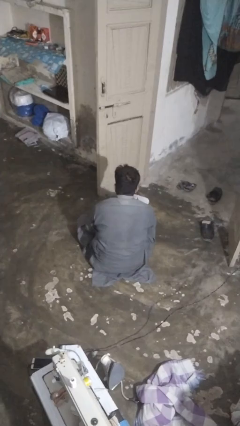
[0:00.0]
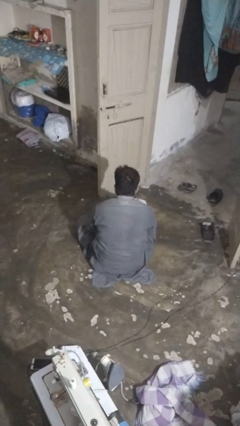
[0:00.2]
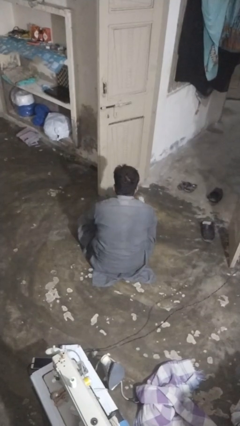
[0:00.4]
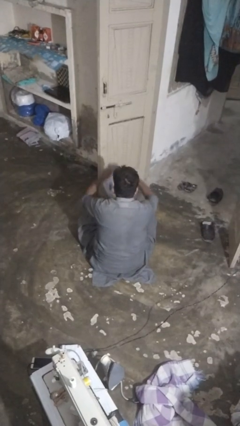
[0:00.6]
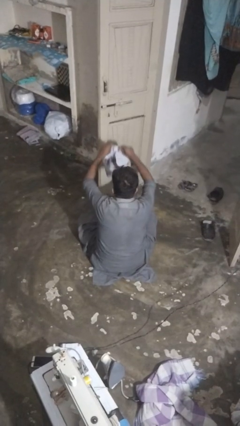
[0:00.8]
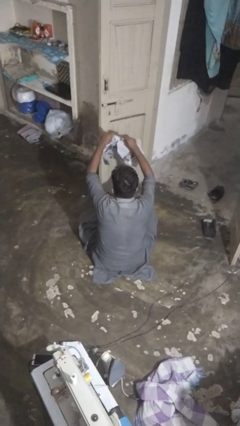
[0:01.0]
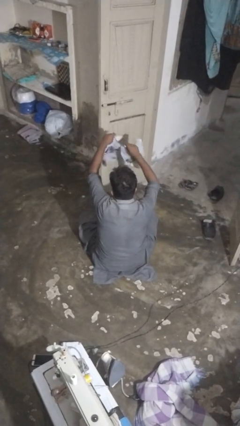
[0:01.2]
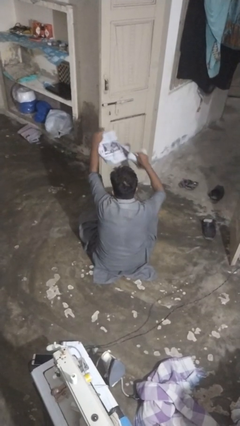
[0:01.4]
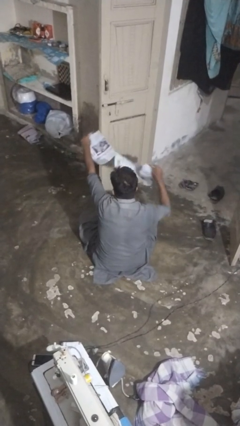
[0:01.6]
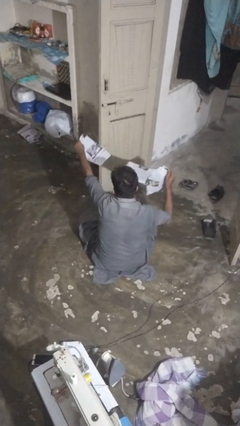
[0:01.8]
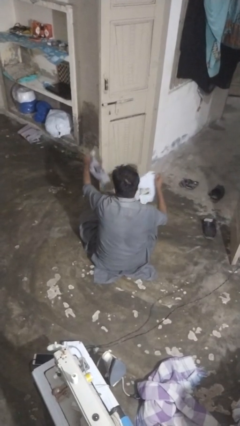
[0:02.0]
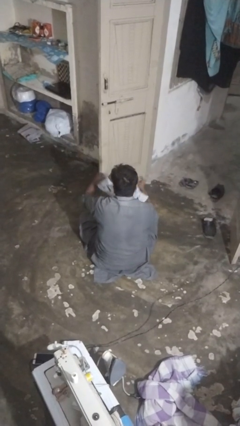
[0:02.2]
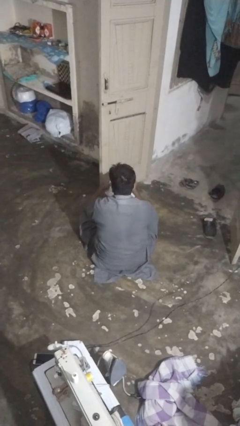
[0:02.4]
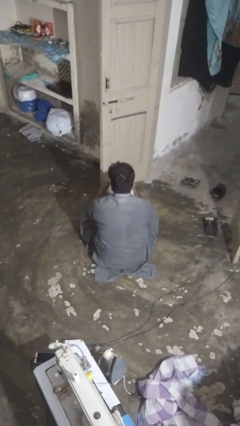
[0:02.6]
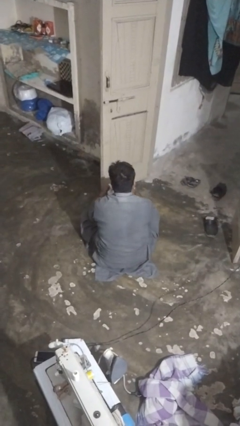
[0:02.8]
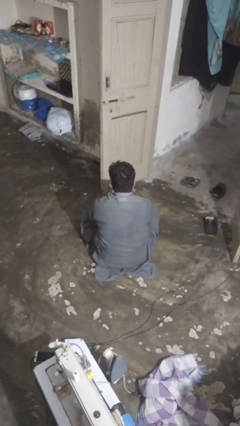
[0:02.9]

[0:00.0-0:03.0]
person tears paper

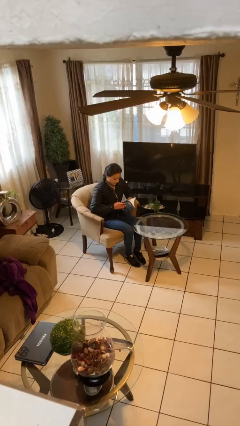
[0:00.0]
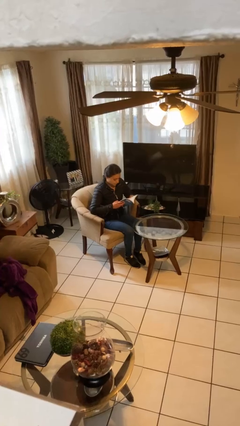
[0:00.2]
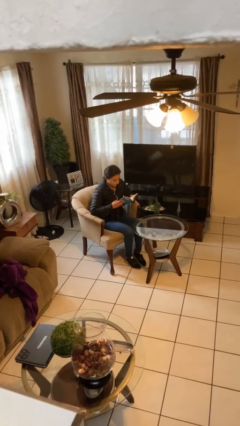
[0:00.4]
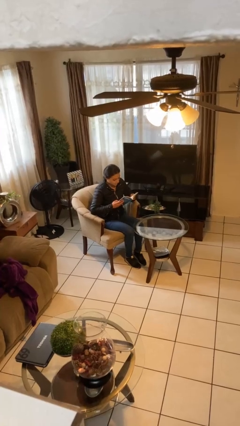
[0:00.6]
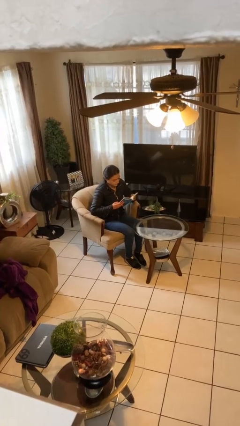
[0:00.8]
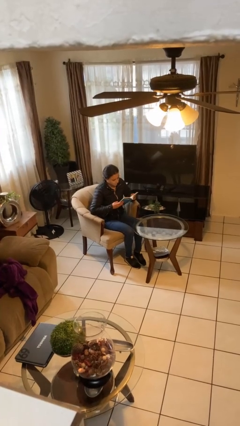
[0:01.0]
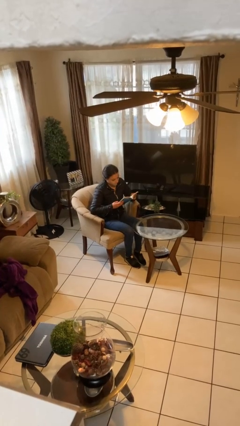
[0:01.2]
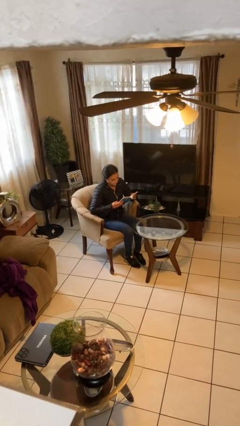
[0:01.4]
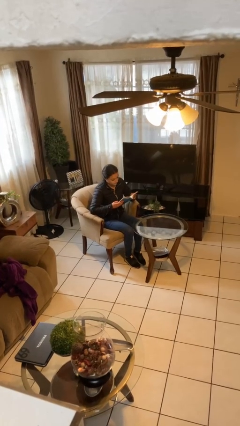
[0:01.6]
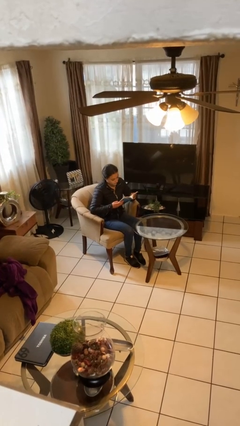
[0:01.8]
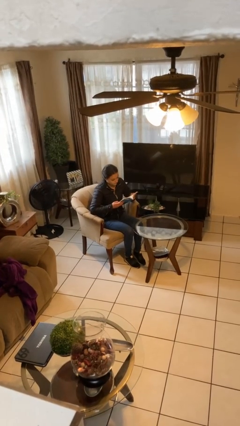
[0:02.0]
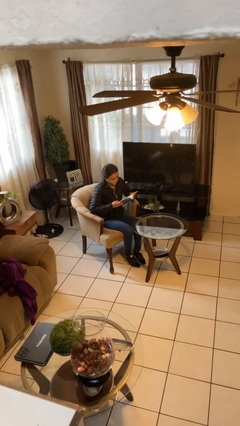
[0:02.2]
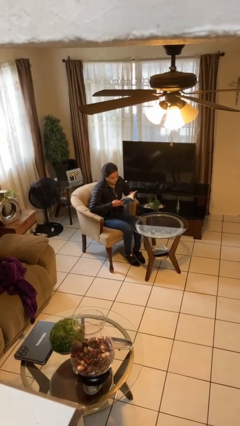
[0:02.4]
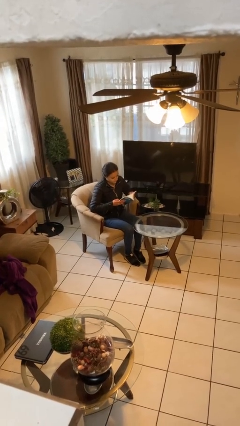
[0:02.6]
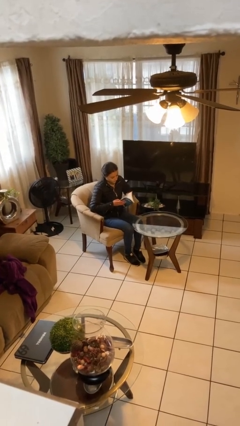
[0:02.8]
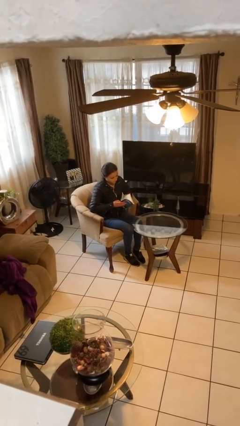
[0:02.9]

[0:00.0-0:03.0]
person reads document

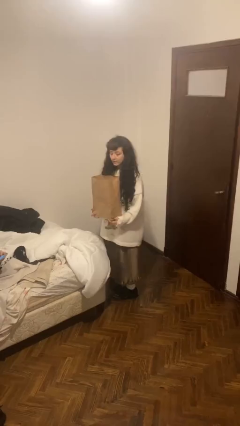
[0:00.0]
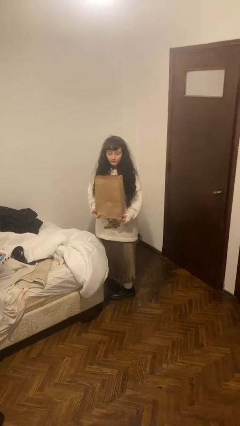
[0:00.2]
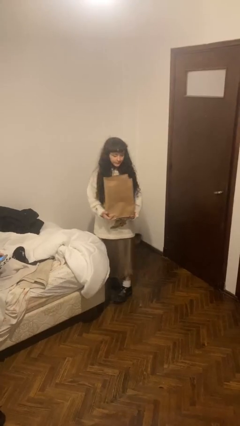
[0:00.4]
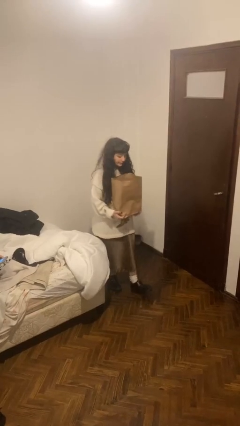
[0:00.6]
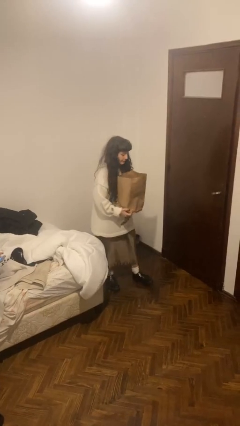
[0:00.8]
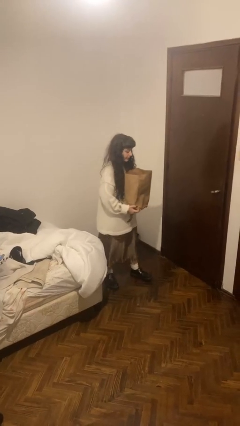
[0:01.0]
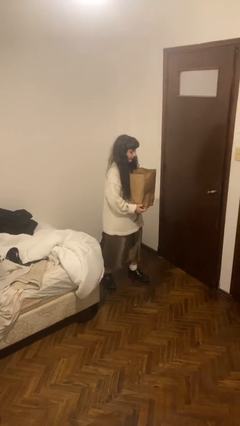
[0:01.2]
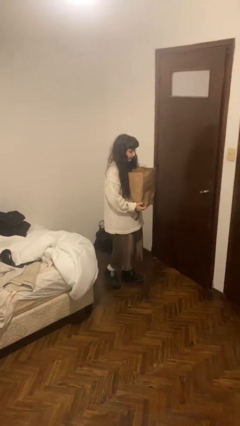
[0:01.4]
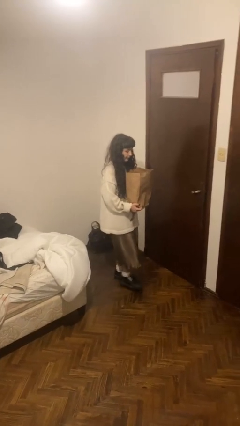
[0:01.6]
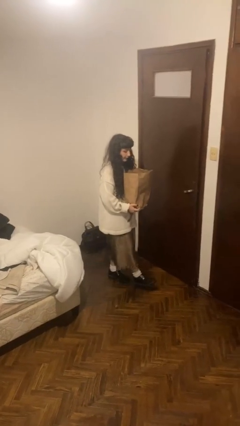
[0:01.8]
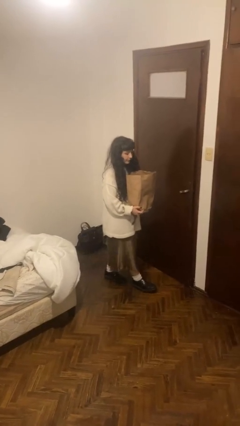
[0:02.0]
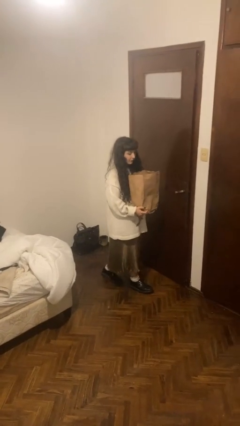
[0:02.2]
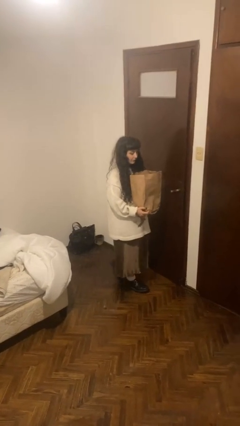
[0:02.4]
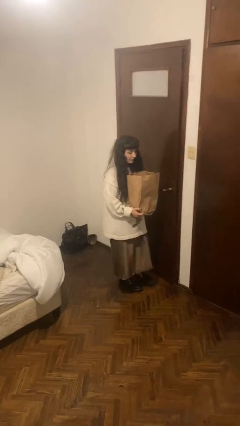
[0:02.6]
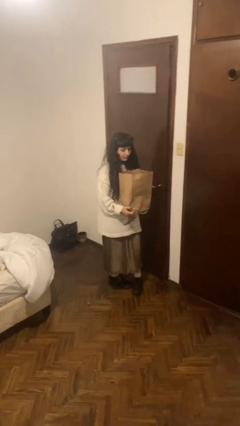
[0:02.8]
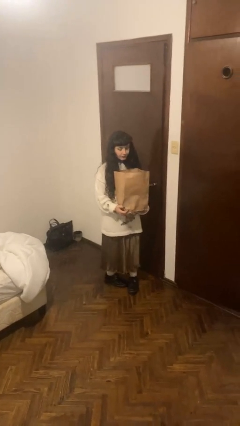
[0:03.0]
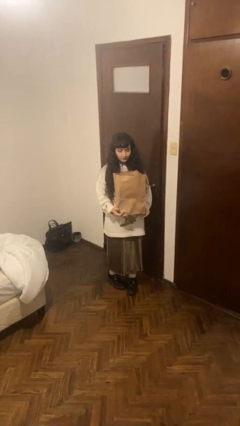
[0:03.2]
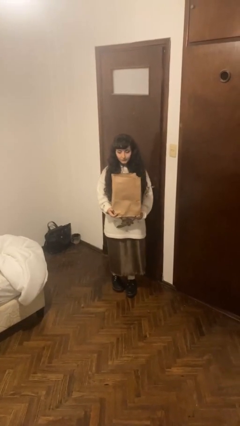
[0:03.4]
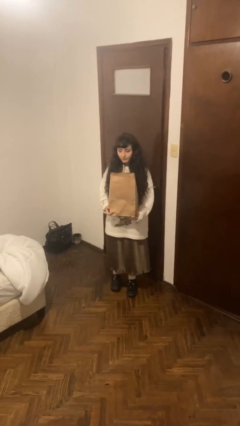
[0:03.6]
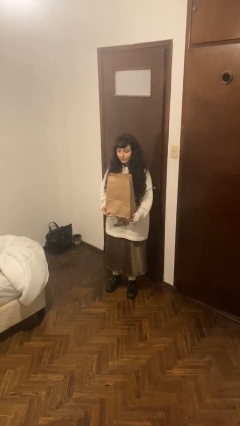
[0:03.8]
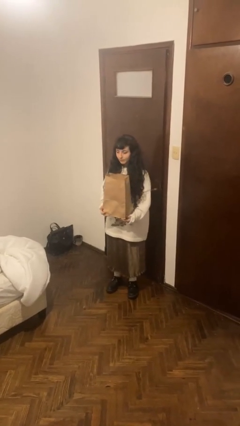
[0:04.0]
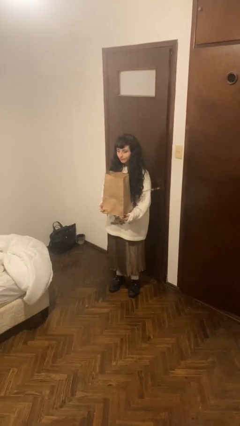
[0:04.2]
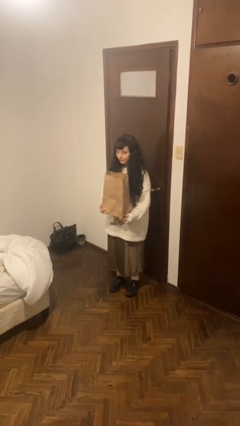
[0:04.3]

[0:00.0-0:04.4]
person carries groceries

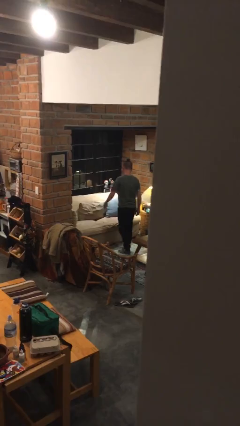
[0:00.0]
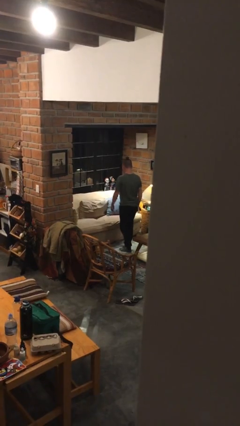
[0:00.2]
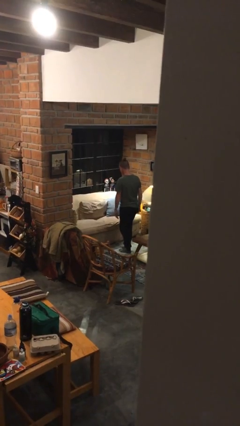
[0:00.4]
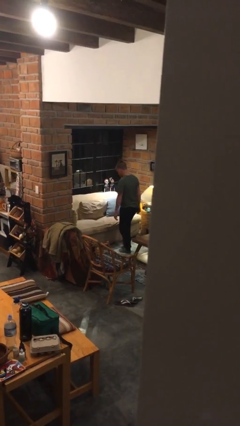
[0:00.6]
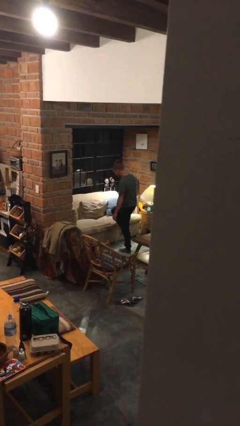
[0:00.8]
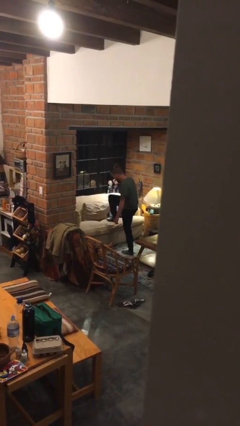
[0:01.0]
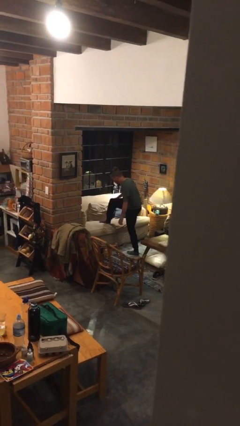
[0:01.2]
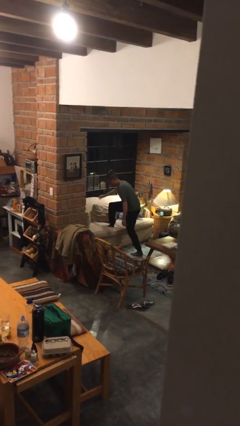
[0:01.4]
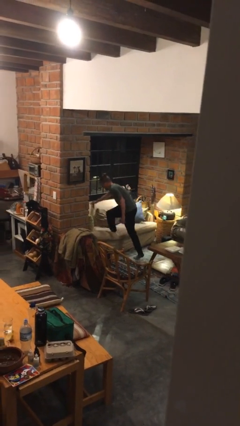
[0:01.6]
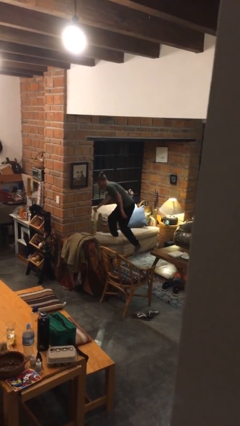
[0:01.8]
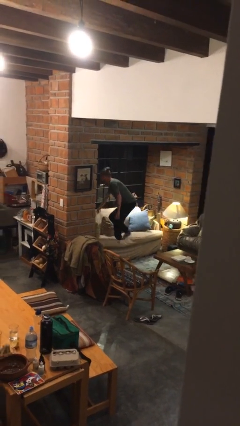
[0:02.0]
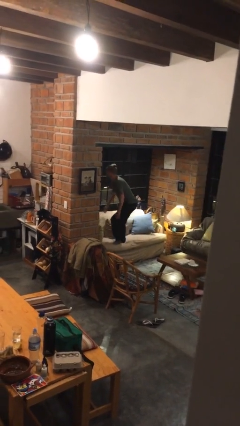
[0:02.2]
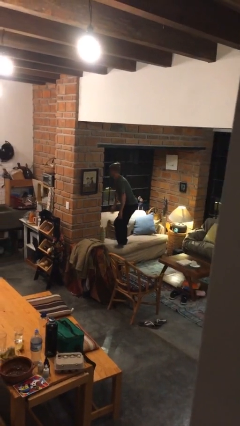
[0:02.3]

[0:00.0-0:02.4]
person climbs on couch

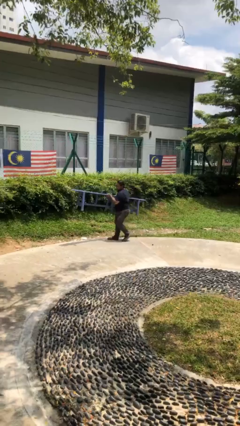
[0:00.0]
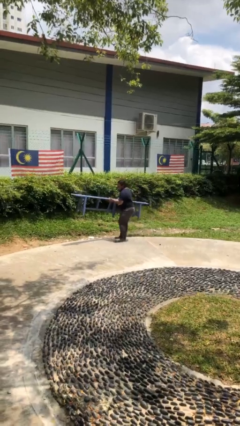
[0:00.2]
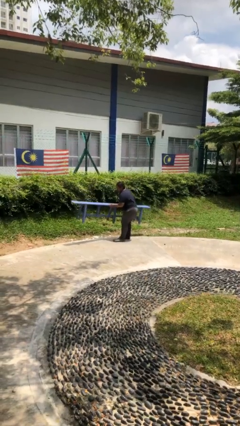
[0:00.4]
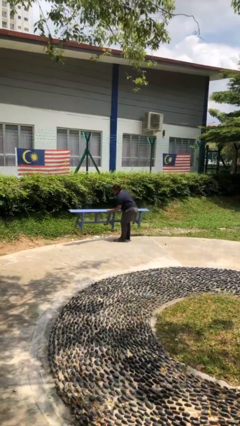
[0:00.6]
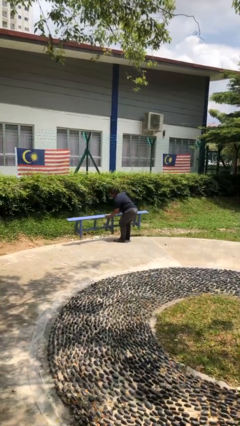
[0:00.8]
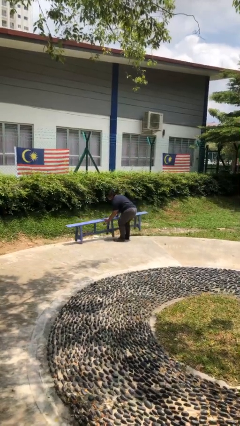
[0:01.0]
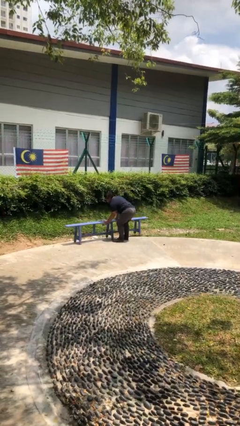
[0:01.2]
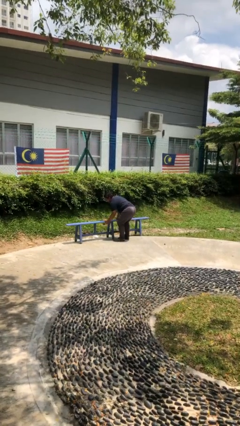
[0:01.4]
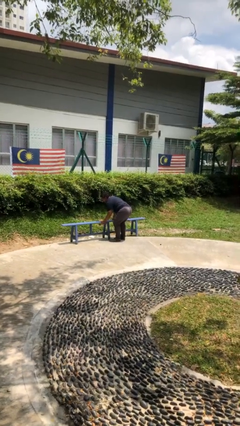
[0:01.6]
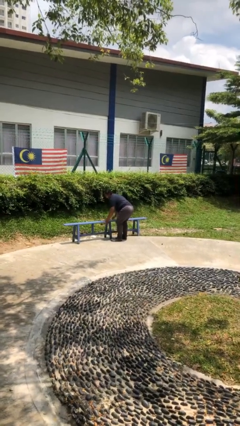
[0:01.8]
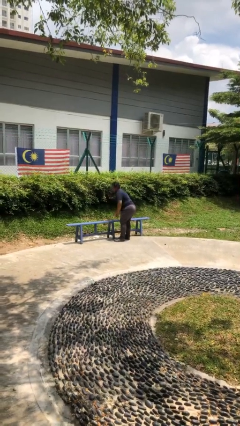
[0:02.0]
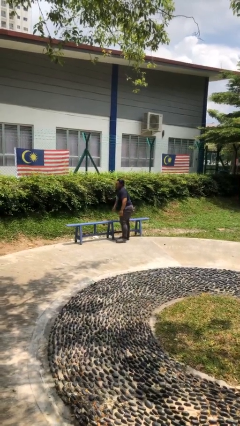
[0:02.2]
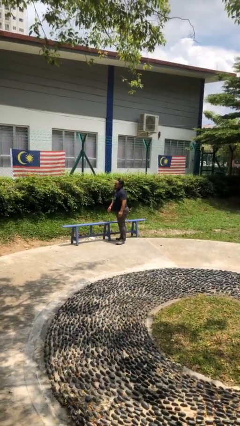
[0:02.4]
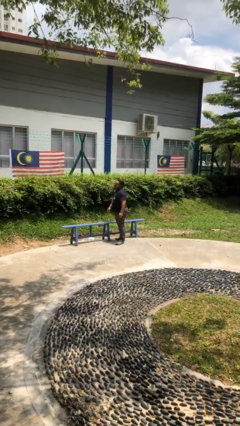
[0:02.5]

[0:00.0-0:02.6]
person puts down object on floor

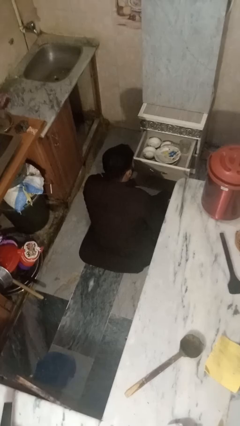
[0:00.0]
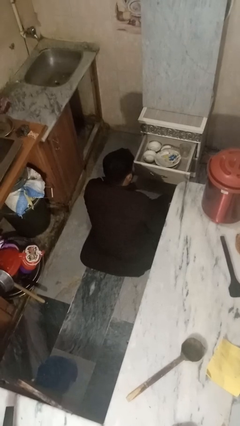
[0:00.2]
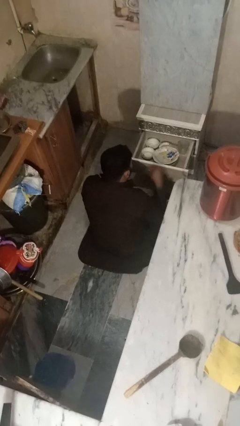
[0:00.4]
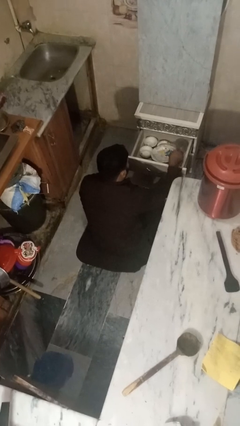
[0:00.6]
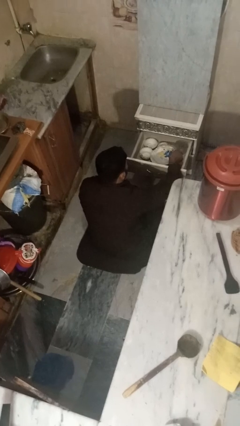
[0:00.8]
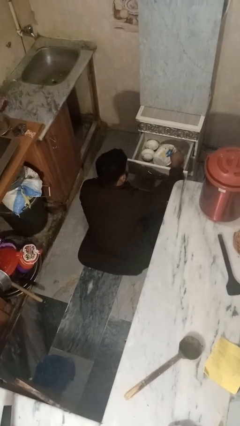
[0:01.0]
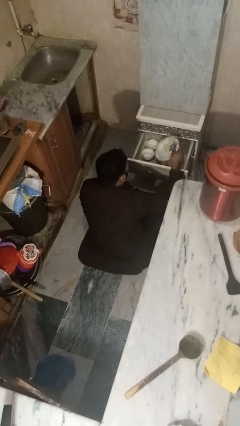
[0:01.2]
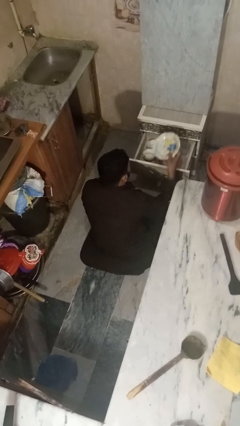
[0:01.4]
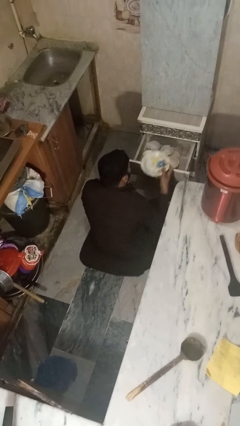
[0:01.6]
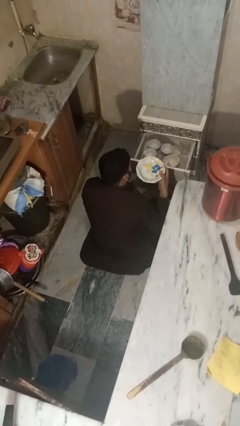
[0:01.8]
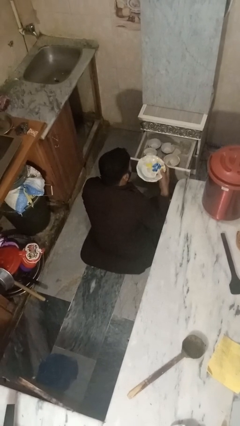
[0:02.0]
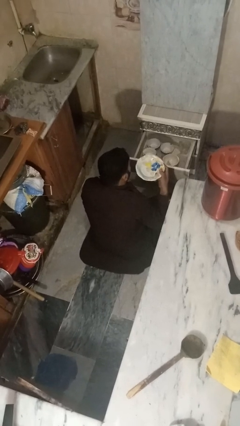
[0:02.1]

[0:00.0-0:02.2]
person takes object from kitchen drawer
